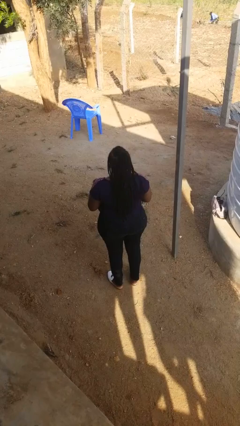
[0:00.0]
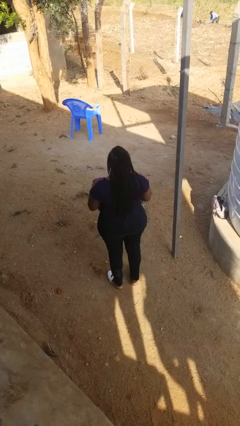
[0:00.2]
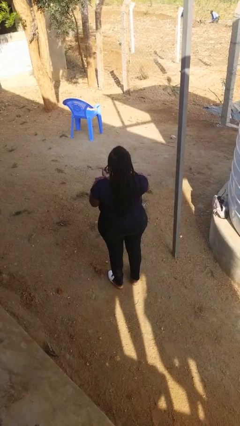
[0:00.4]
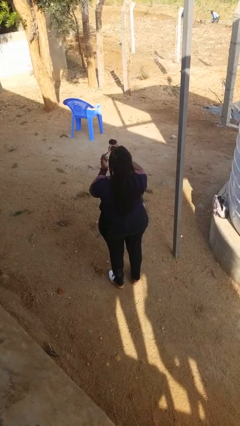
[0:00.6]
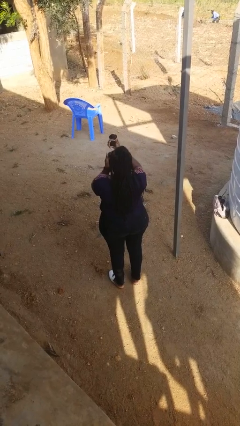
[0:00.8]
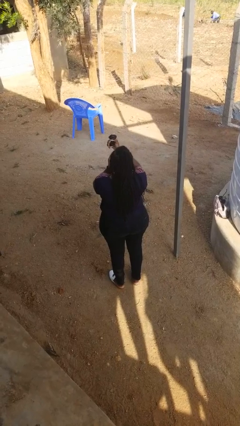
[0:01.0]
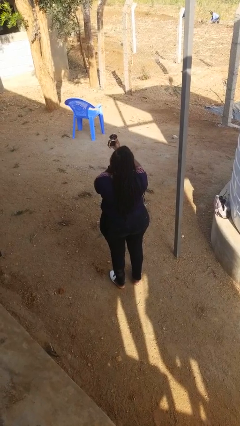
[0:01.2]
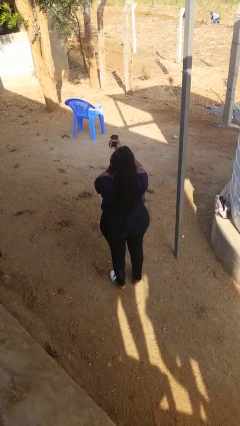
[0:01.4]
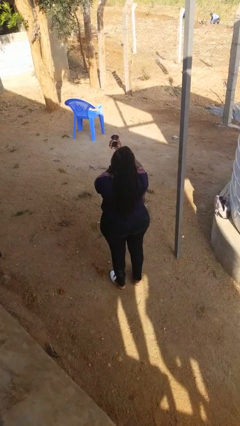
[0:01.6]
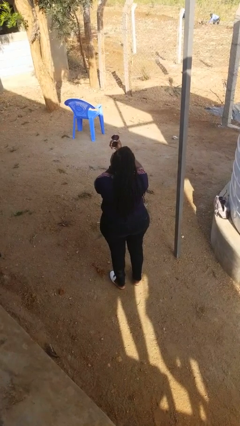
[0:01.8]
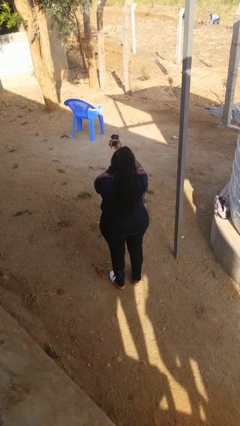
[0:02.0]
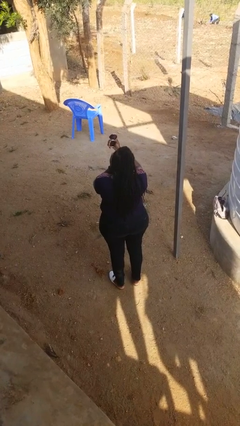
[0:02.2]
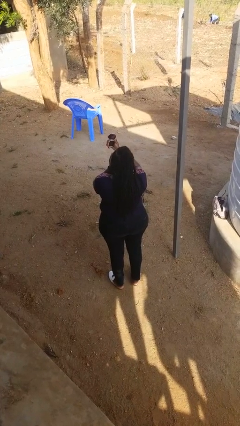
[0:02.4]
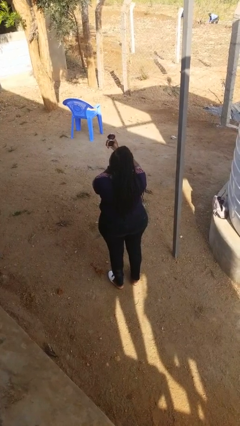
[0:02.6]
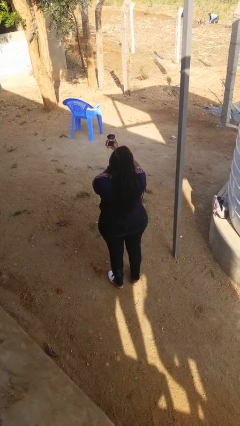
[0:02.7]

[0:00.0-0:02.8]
person applies eye makeup

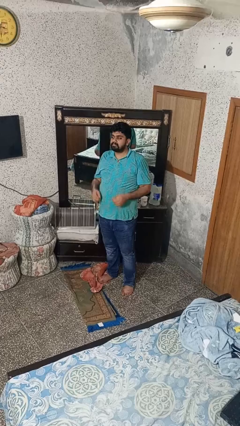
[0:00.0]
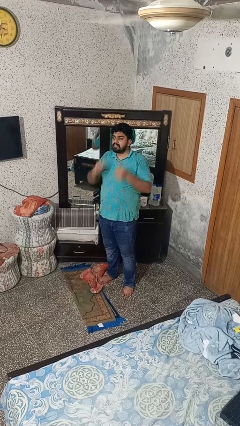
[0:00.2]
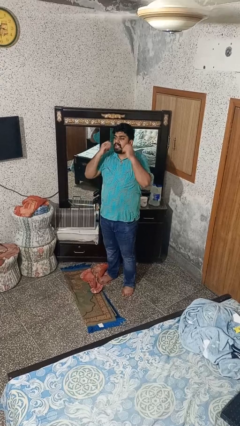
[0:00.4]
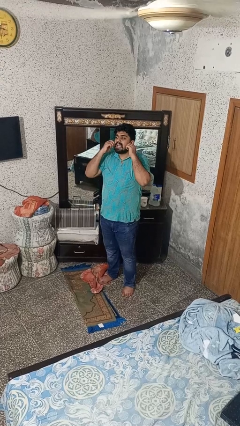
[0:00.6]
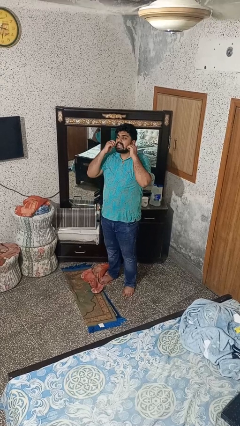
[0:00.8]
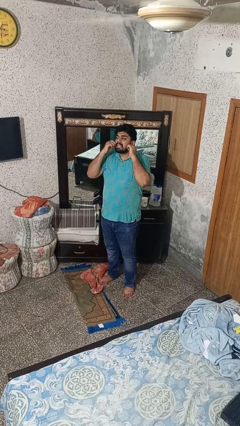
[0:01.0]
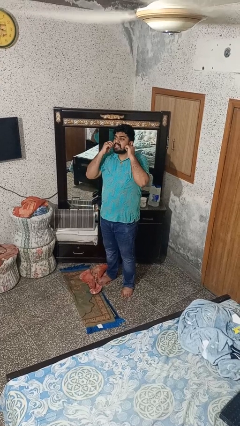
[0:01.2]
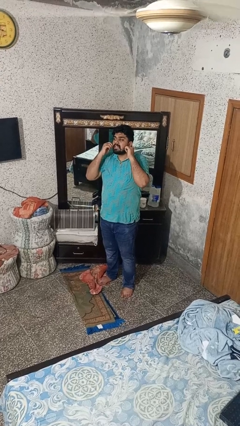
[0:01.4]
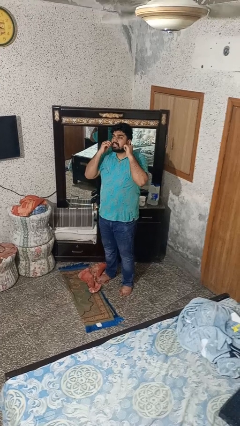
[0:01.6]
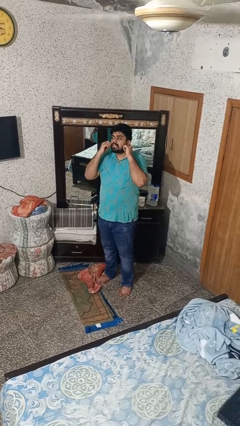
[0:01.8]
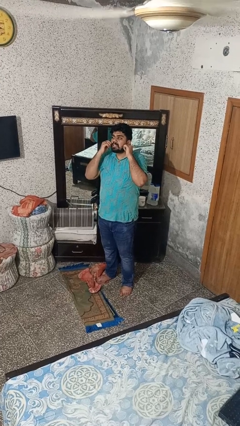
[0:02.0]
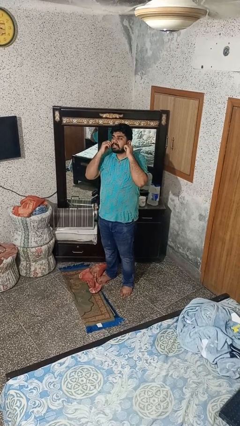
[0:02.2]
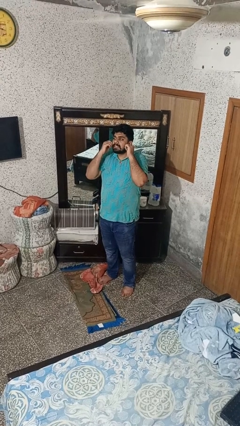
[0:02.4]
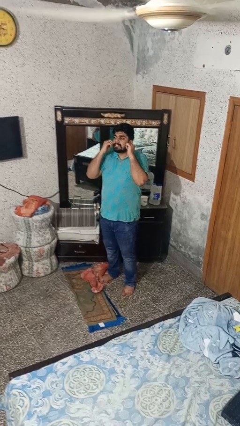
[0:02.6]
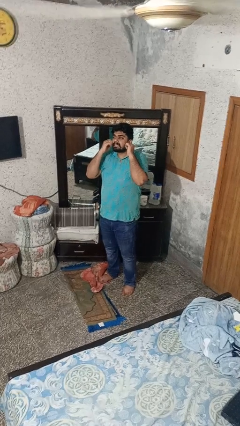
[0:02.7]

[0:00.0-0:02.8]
person flosses

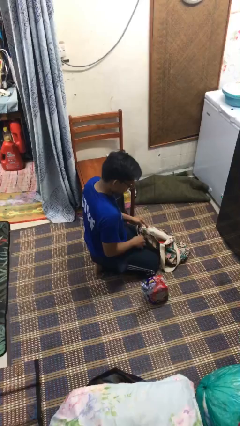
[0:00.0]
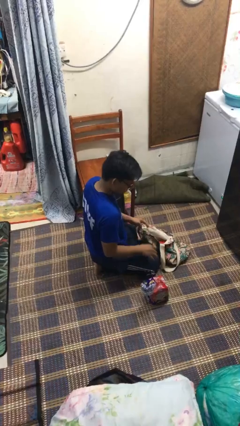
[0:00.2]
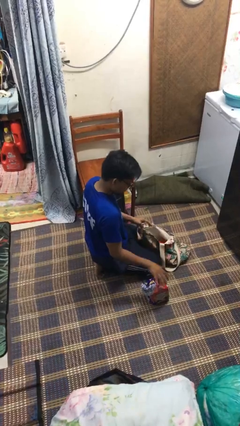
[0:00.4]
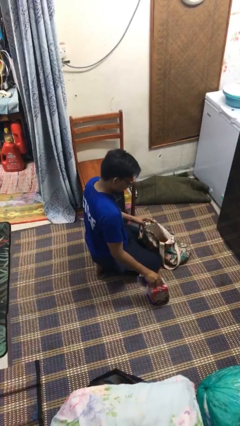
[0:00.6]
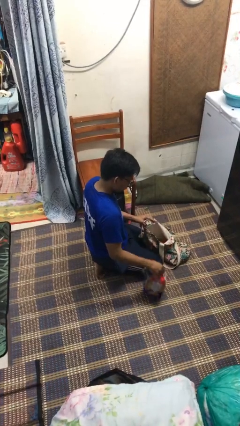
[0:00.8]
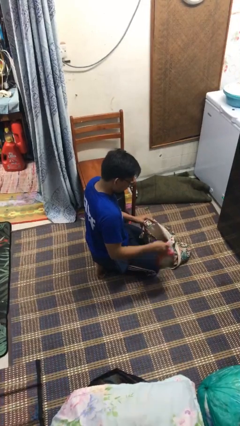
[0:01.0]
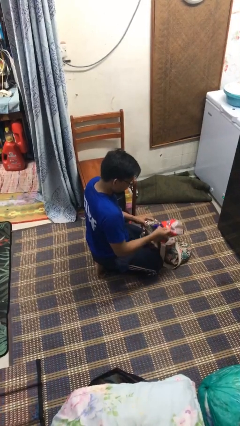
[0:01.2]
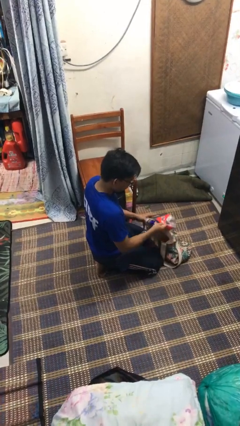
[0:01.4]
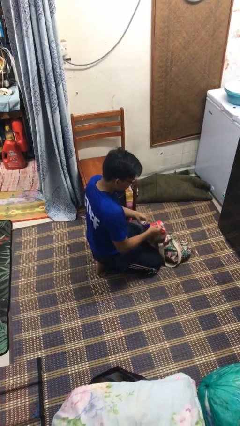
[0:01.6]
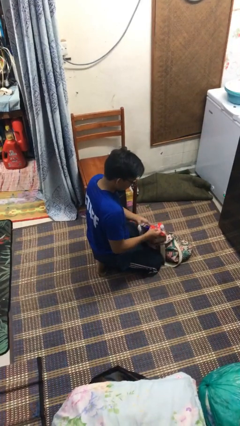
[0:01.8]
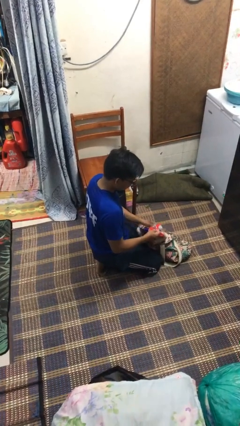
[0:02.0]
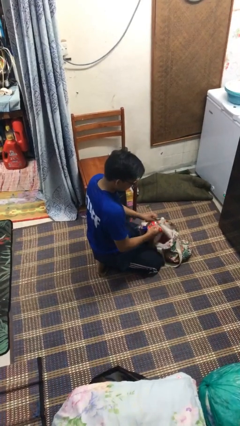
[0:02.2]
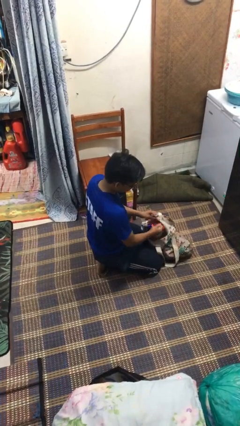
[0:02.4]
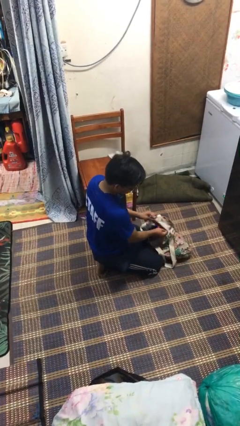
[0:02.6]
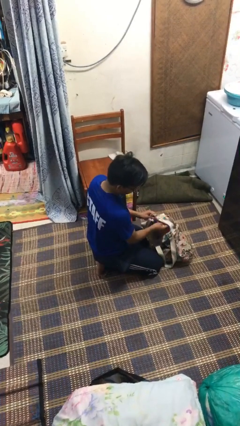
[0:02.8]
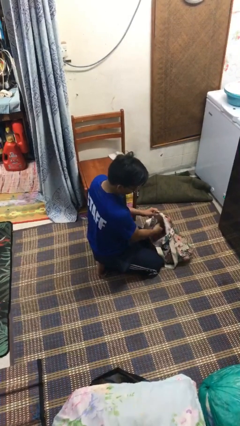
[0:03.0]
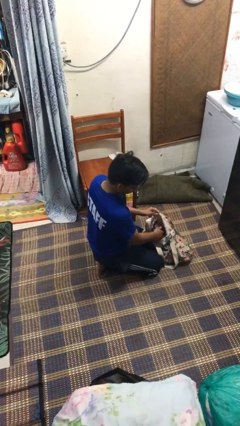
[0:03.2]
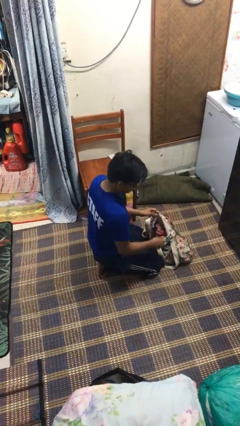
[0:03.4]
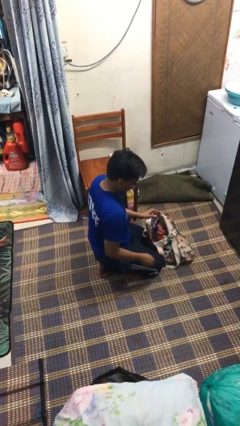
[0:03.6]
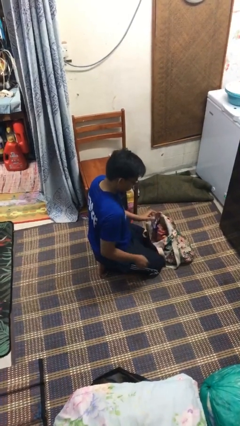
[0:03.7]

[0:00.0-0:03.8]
person puts object into bag

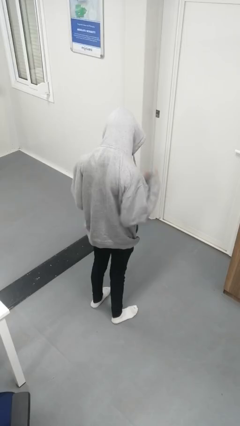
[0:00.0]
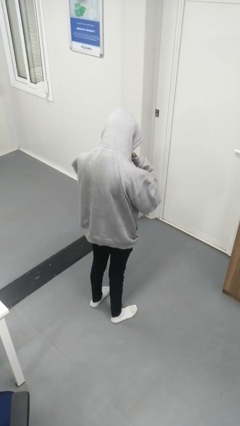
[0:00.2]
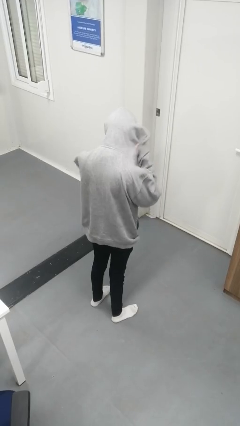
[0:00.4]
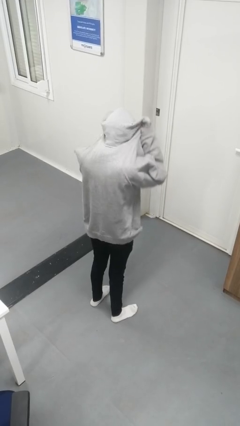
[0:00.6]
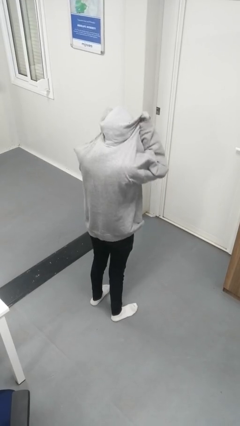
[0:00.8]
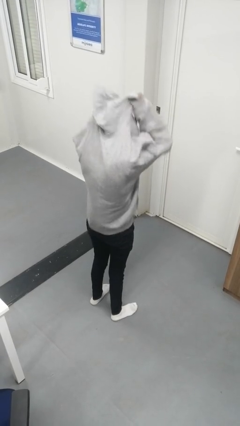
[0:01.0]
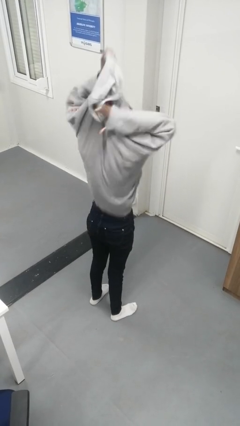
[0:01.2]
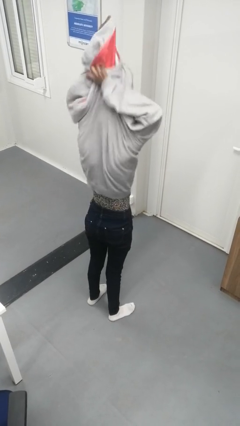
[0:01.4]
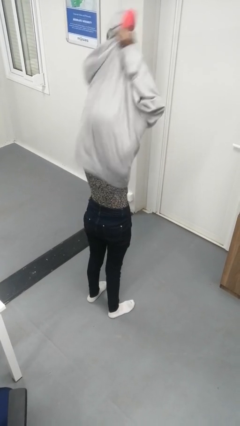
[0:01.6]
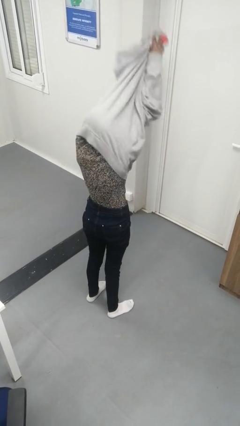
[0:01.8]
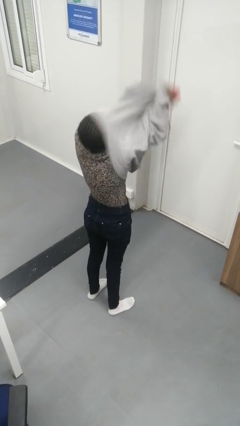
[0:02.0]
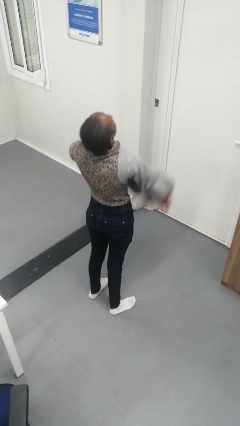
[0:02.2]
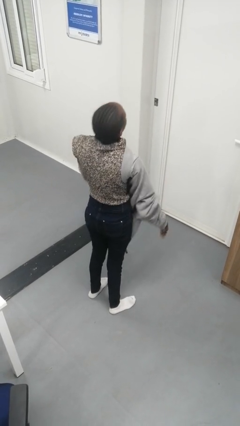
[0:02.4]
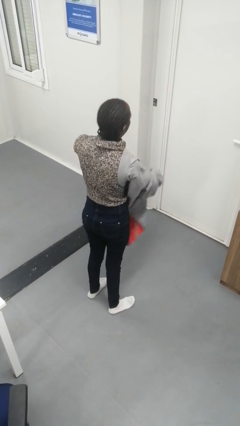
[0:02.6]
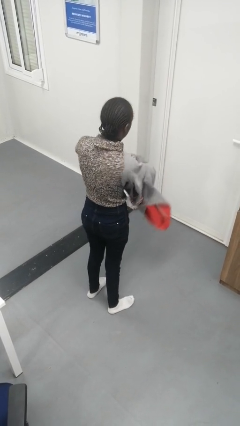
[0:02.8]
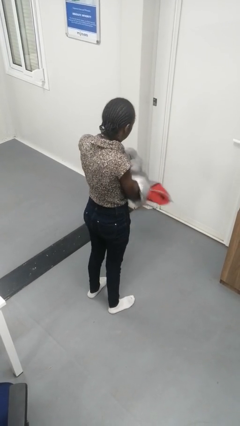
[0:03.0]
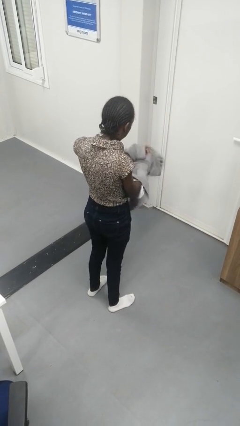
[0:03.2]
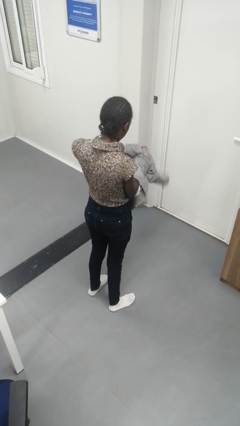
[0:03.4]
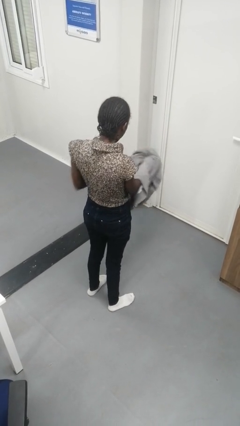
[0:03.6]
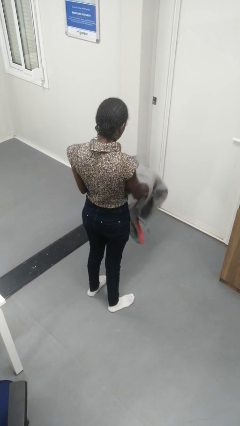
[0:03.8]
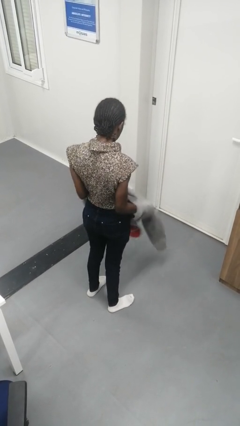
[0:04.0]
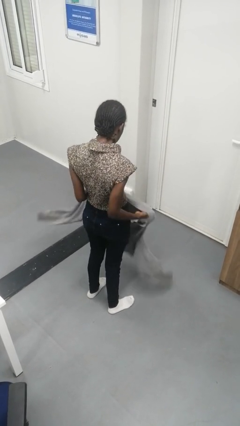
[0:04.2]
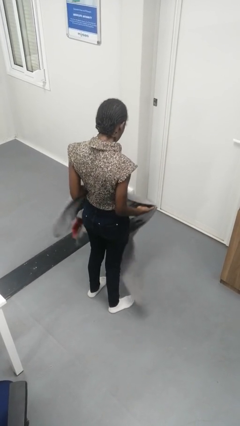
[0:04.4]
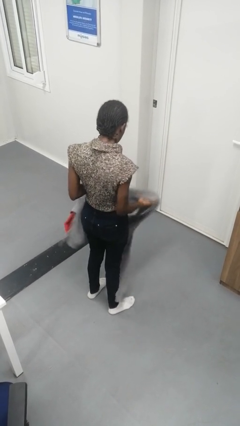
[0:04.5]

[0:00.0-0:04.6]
person takes off hoodie

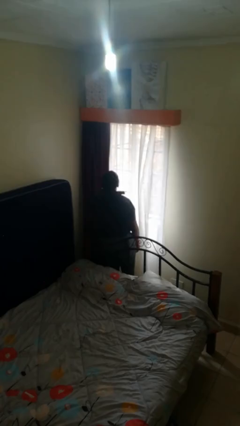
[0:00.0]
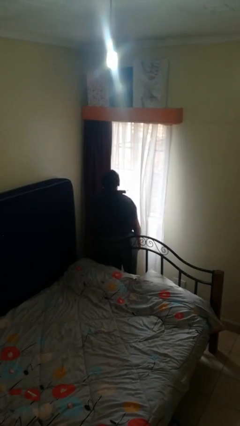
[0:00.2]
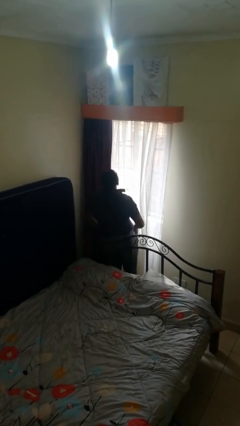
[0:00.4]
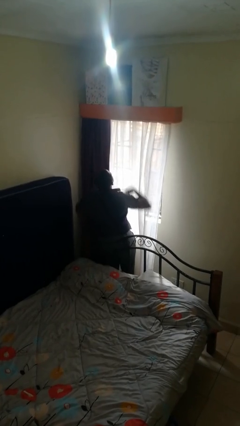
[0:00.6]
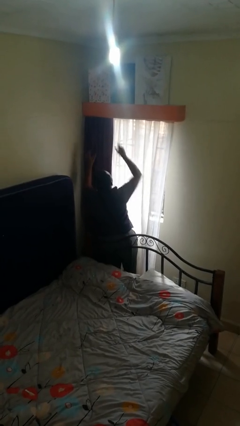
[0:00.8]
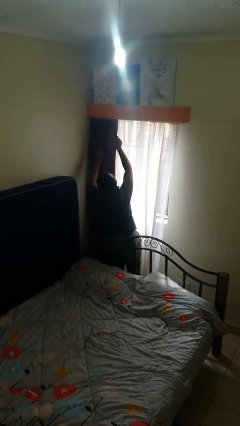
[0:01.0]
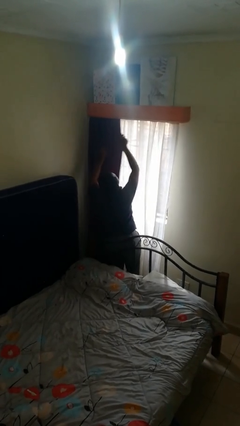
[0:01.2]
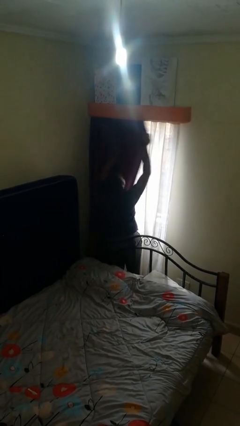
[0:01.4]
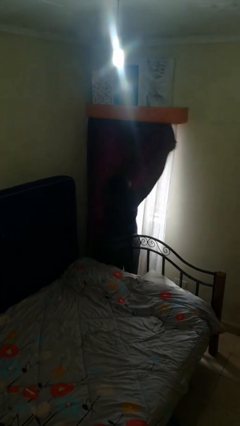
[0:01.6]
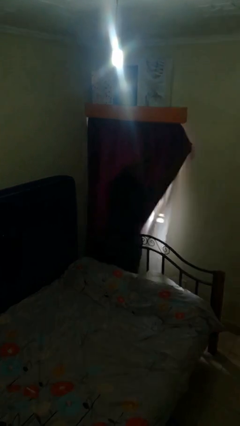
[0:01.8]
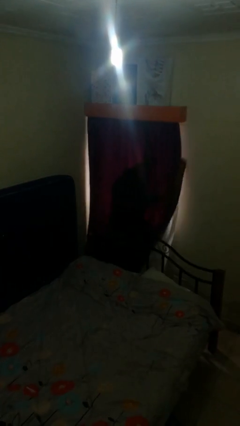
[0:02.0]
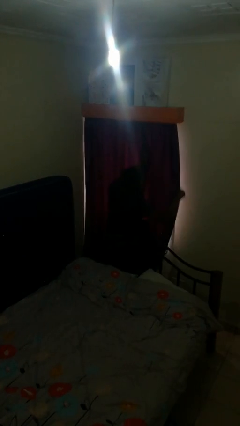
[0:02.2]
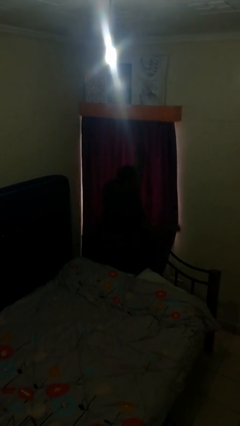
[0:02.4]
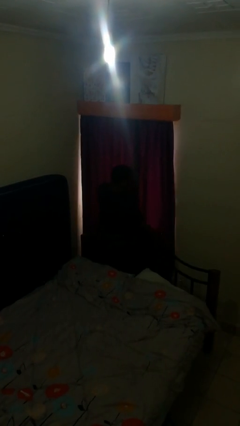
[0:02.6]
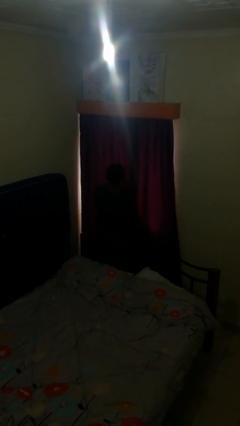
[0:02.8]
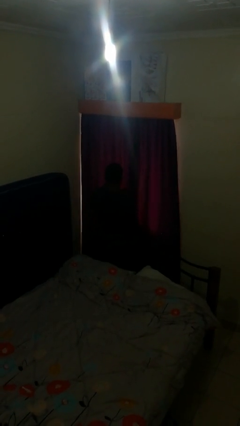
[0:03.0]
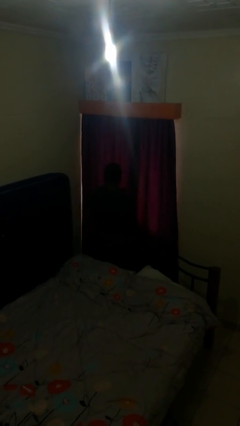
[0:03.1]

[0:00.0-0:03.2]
person closes curtains

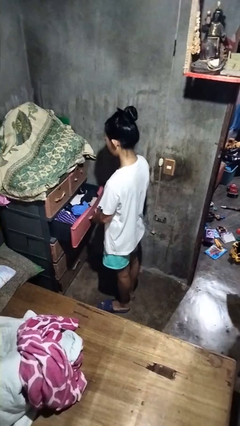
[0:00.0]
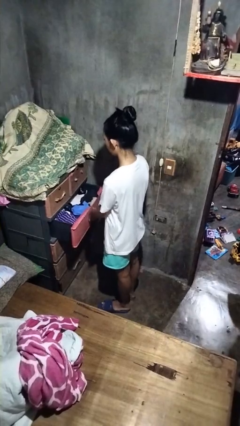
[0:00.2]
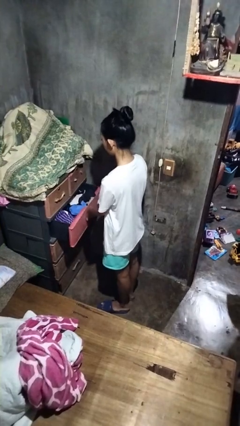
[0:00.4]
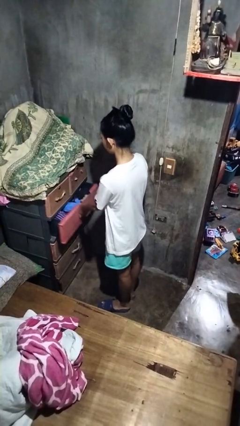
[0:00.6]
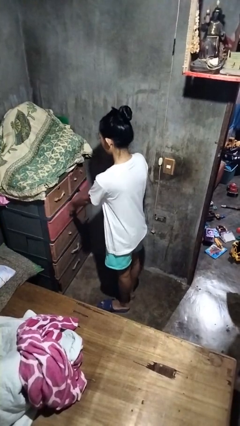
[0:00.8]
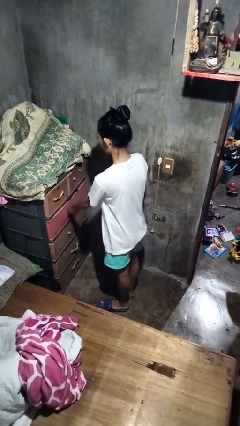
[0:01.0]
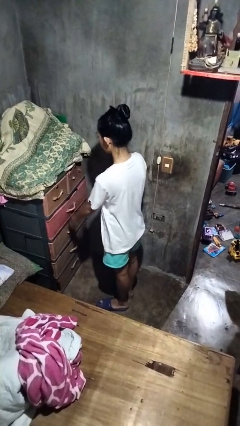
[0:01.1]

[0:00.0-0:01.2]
person closes dresser drawer
